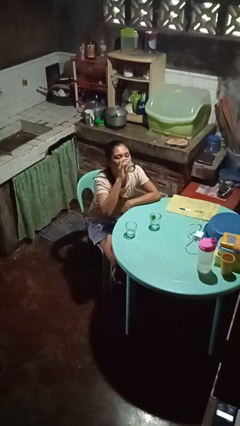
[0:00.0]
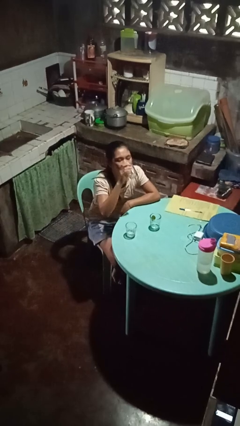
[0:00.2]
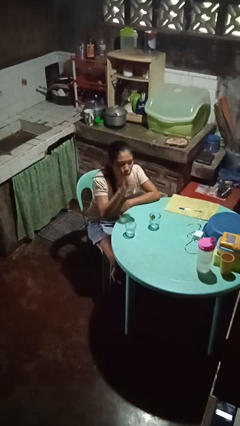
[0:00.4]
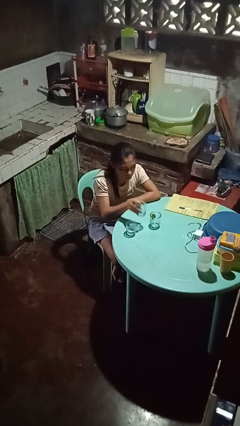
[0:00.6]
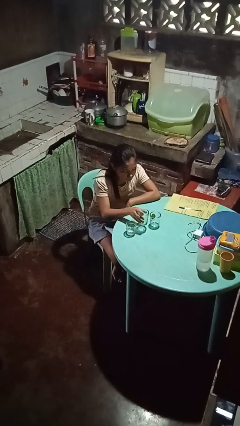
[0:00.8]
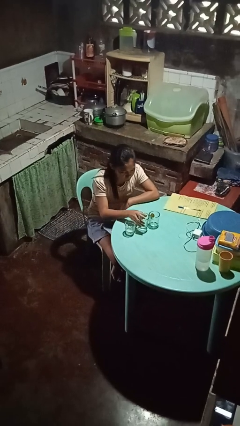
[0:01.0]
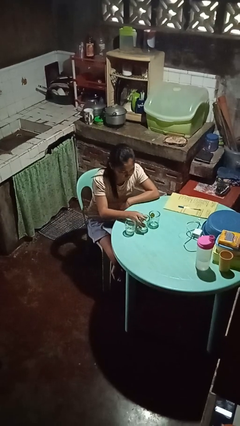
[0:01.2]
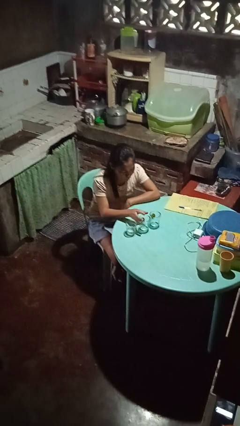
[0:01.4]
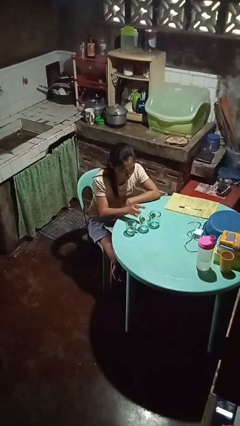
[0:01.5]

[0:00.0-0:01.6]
person puts down object on table

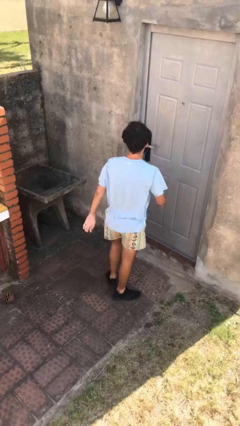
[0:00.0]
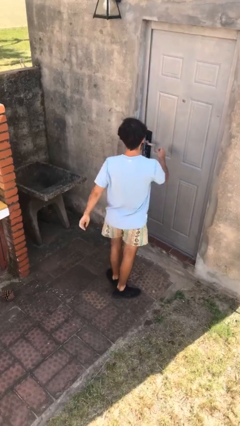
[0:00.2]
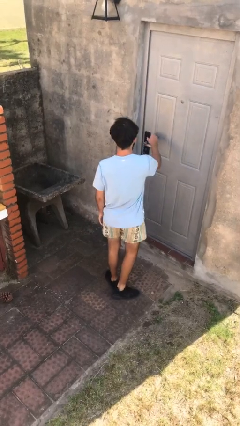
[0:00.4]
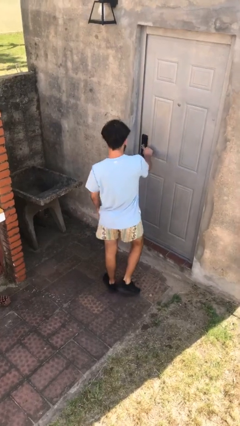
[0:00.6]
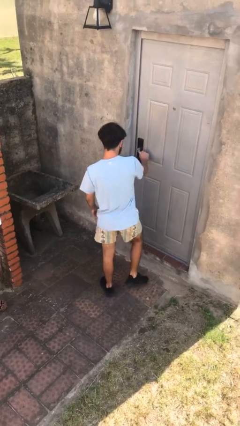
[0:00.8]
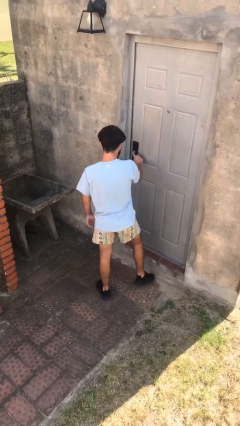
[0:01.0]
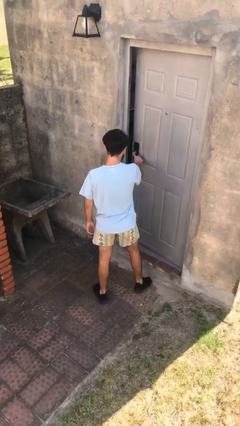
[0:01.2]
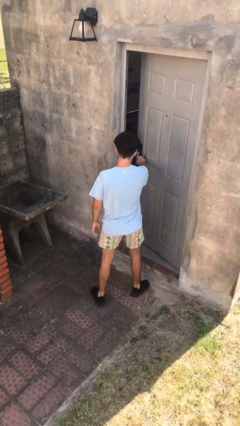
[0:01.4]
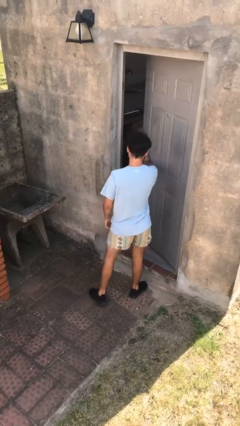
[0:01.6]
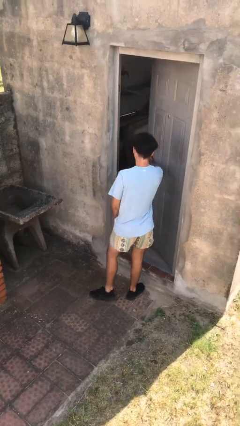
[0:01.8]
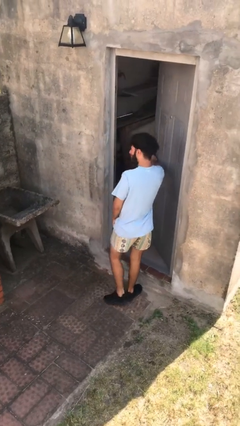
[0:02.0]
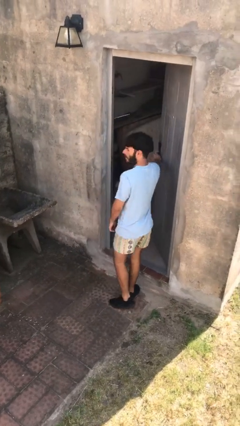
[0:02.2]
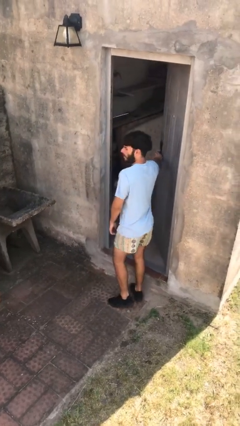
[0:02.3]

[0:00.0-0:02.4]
person opens facility door

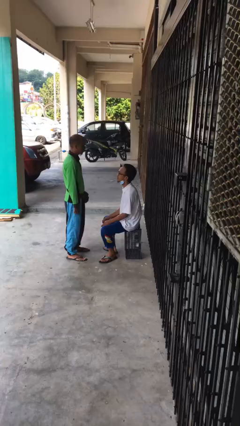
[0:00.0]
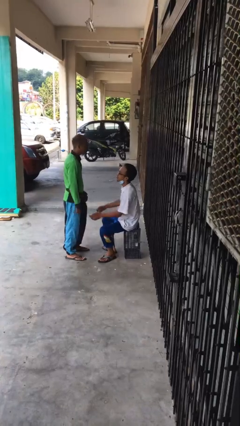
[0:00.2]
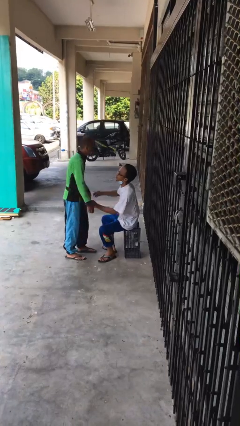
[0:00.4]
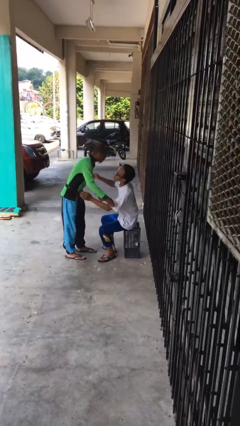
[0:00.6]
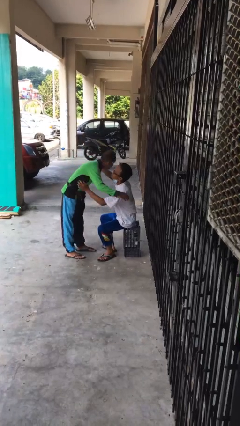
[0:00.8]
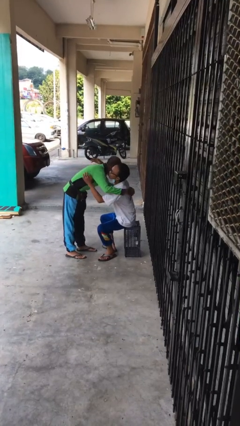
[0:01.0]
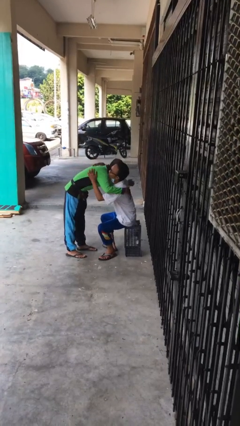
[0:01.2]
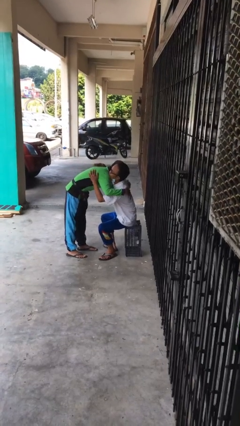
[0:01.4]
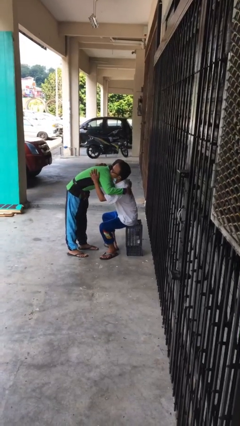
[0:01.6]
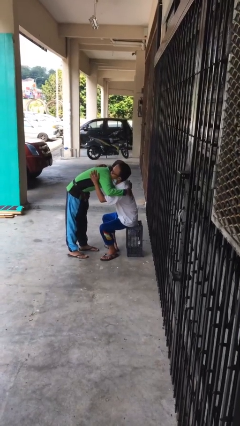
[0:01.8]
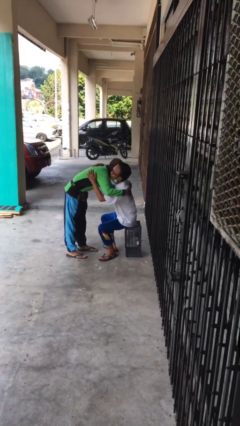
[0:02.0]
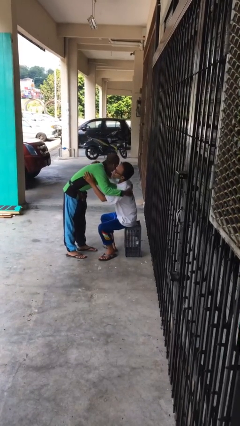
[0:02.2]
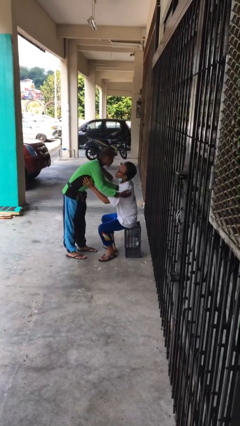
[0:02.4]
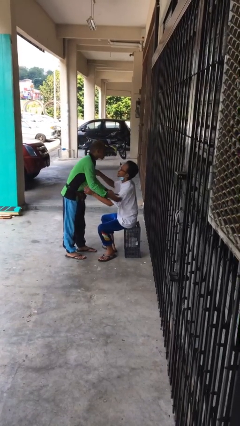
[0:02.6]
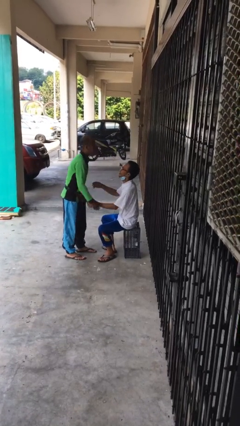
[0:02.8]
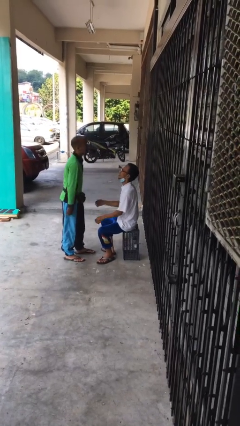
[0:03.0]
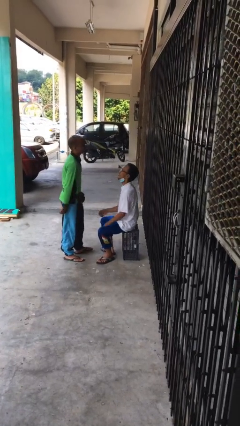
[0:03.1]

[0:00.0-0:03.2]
person embraces person

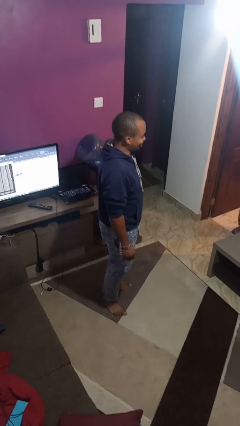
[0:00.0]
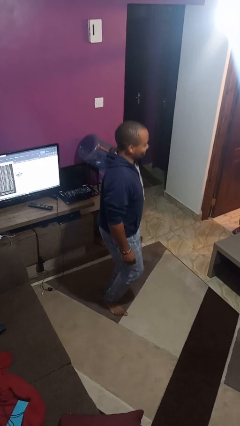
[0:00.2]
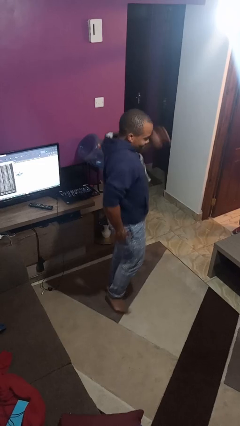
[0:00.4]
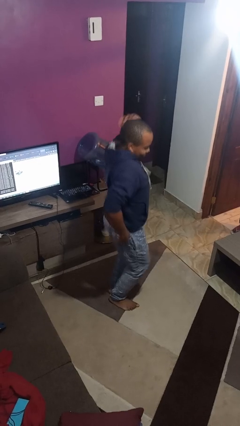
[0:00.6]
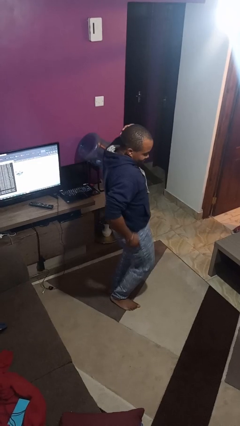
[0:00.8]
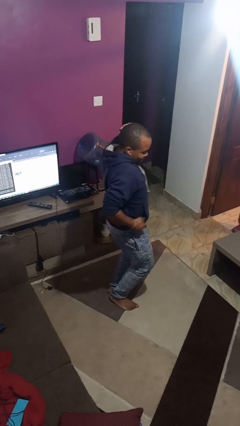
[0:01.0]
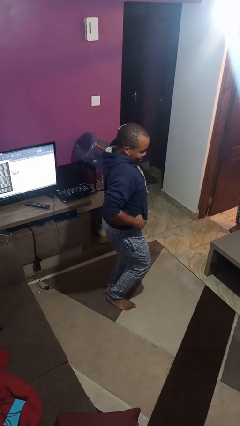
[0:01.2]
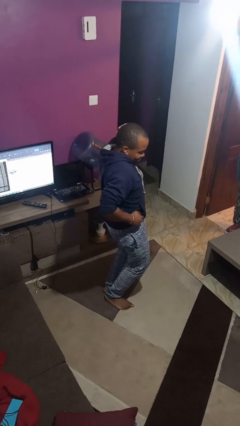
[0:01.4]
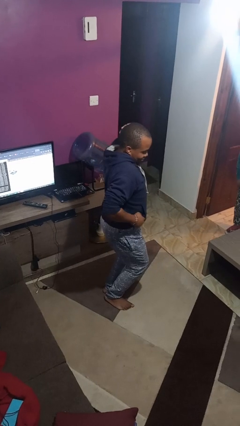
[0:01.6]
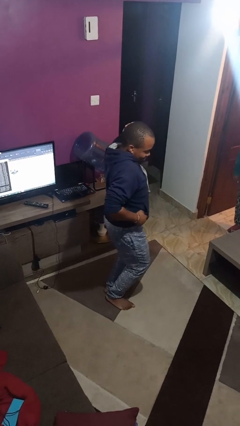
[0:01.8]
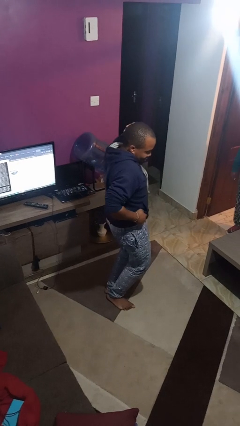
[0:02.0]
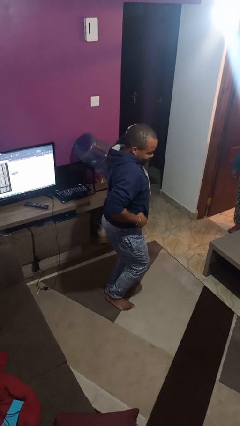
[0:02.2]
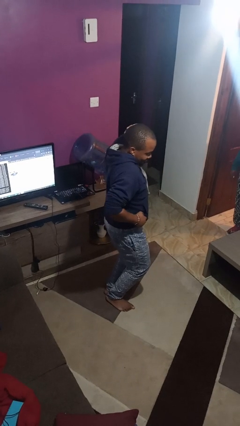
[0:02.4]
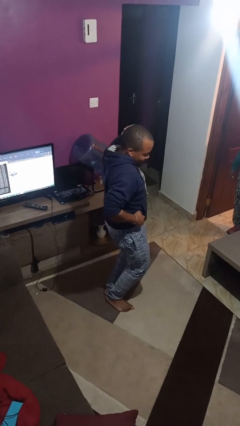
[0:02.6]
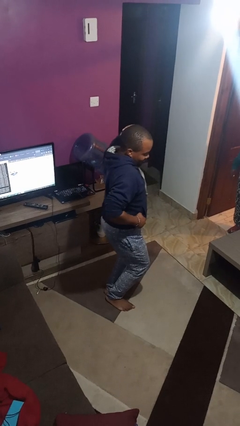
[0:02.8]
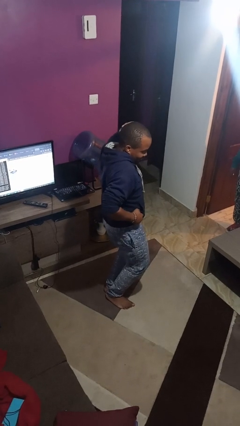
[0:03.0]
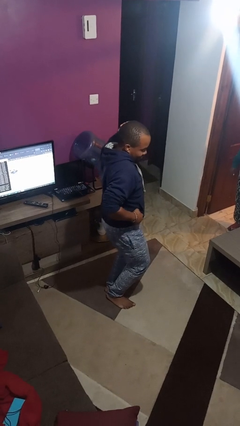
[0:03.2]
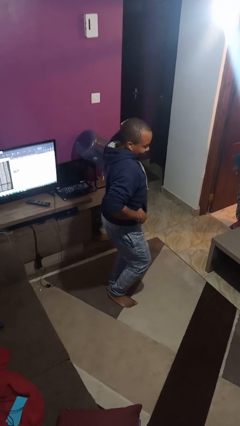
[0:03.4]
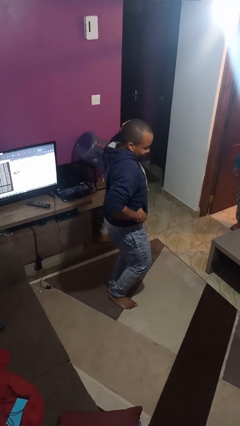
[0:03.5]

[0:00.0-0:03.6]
person wiggles hips

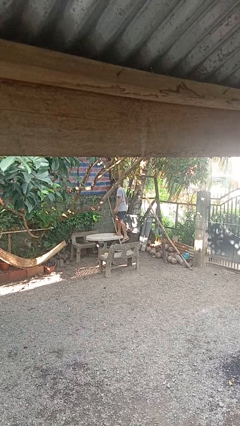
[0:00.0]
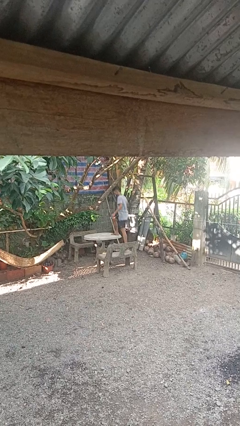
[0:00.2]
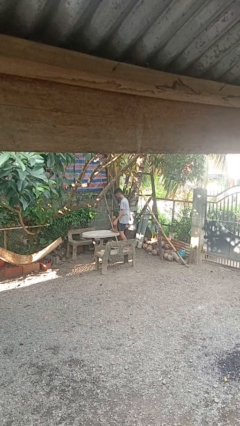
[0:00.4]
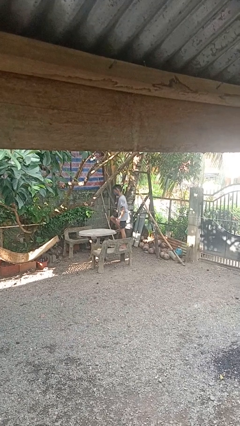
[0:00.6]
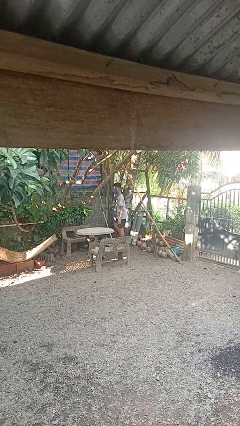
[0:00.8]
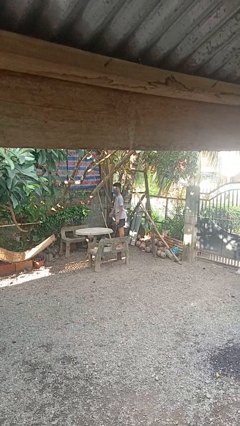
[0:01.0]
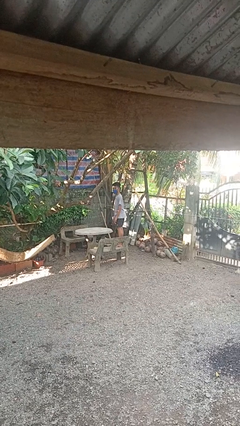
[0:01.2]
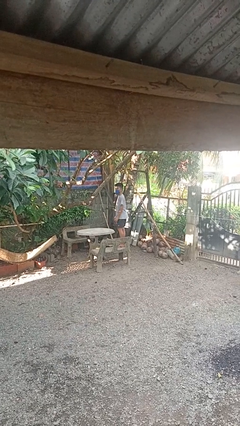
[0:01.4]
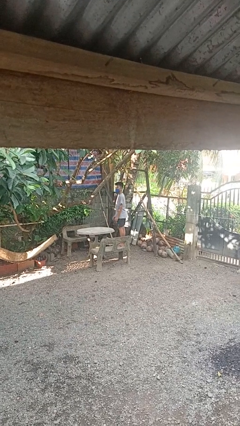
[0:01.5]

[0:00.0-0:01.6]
person climbs off table

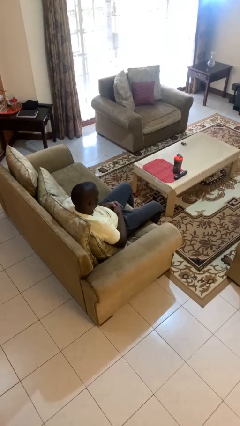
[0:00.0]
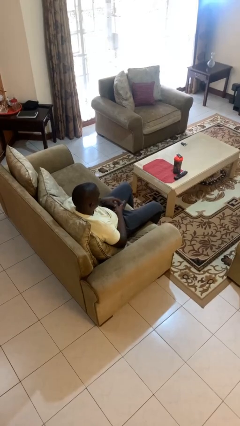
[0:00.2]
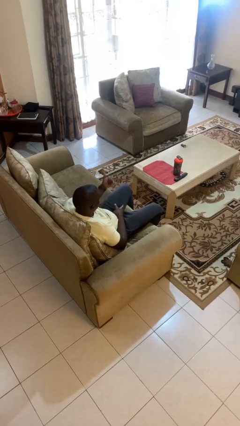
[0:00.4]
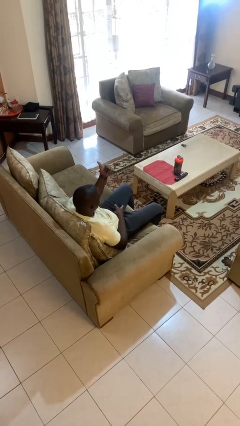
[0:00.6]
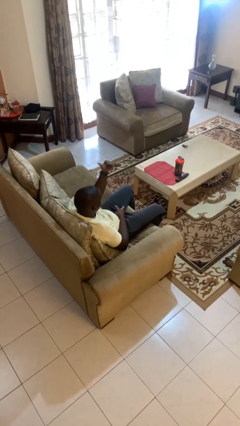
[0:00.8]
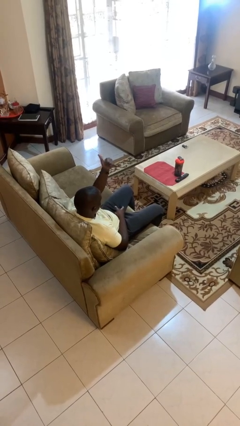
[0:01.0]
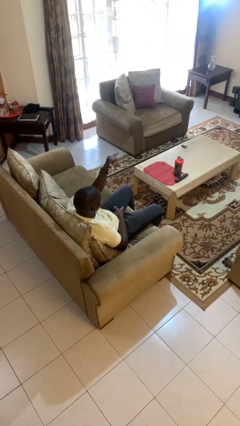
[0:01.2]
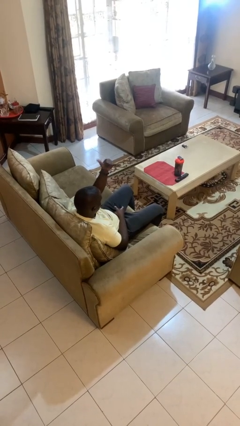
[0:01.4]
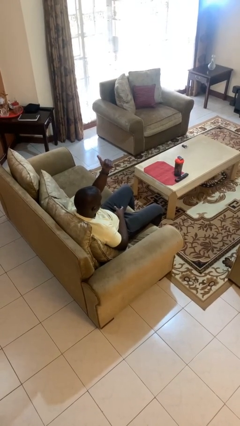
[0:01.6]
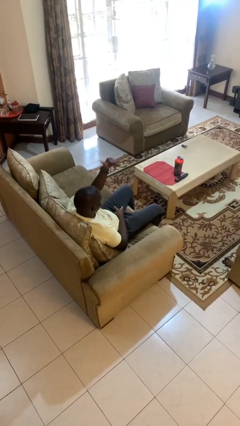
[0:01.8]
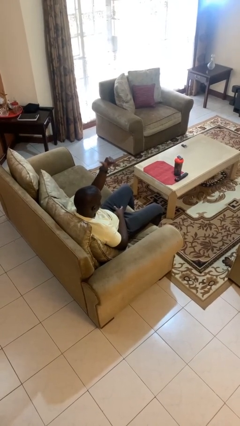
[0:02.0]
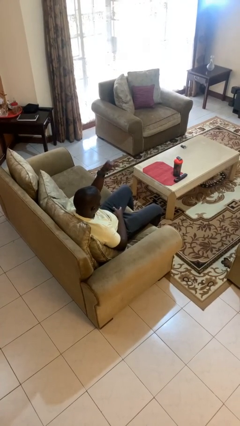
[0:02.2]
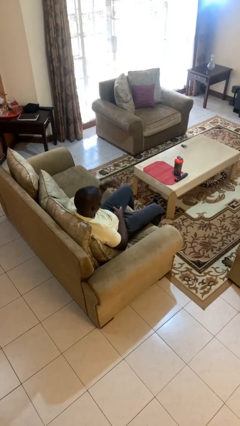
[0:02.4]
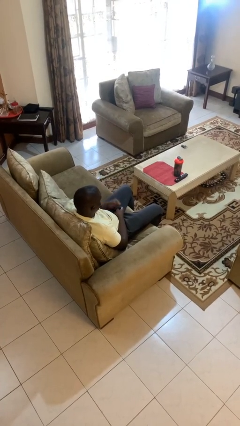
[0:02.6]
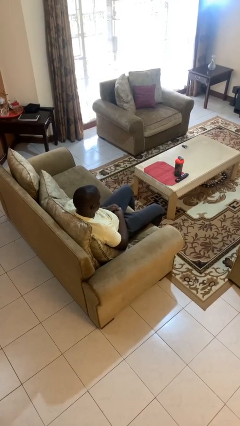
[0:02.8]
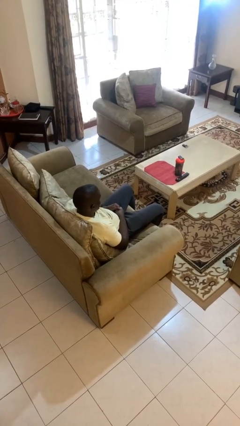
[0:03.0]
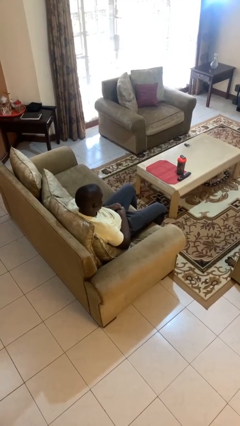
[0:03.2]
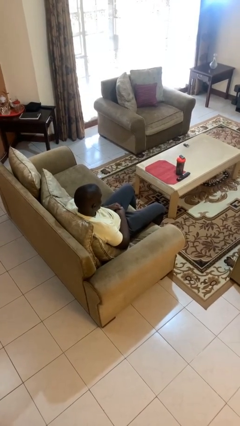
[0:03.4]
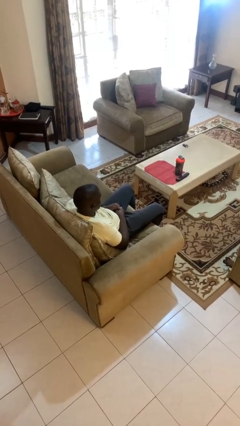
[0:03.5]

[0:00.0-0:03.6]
person gestures hang loose

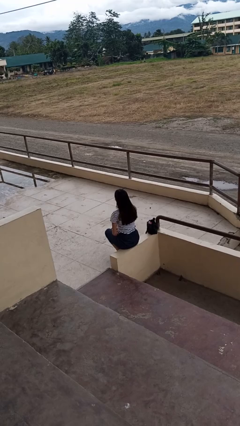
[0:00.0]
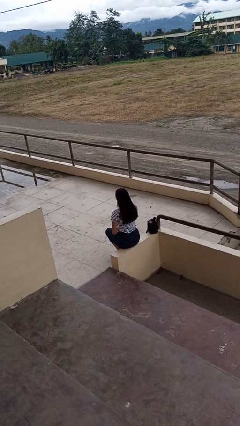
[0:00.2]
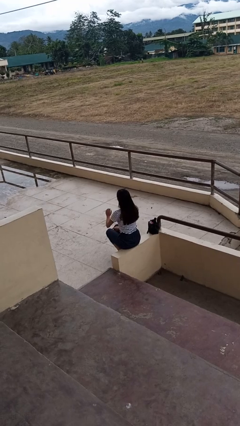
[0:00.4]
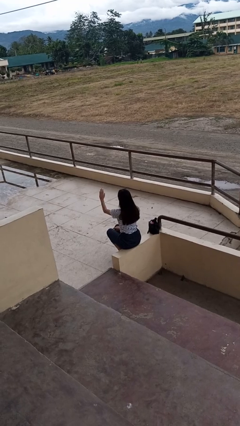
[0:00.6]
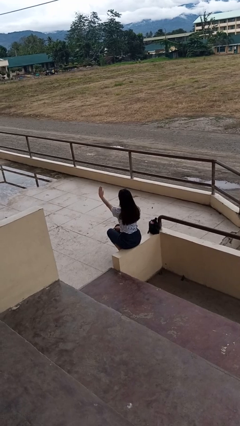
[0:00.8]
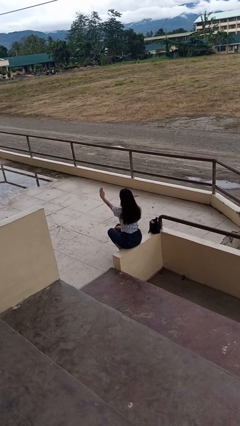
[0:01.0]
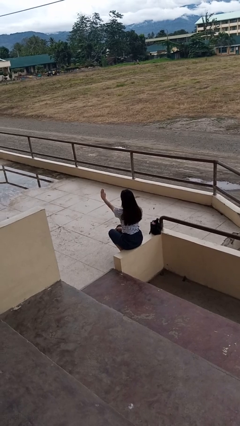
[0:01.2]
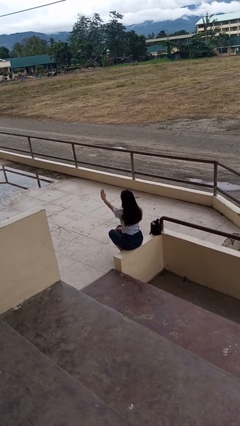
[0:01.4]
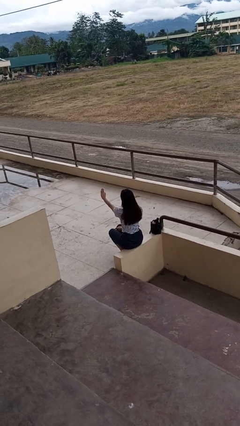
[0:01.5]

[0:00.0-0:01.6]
person gestures stop
